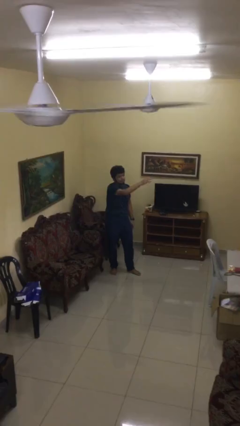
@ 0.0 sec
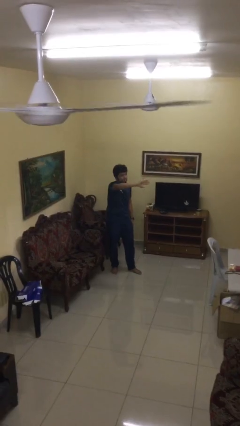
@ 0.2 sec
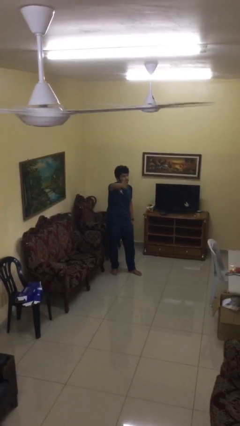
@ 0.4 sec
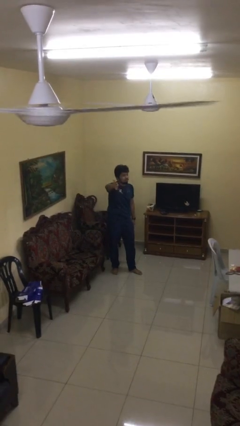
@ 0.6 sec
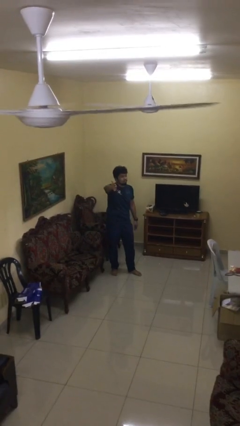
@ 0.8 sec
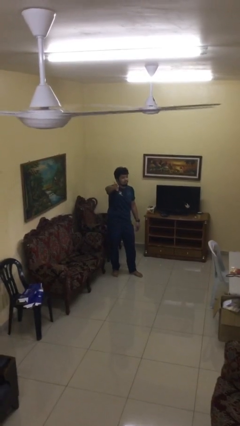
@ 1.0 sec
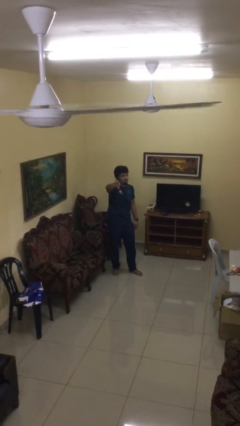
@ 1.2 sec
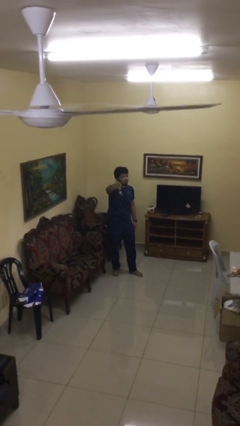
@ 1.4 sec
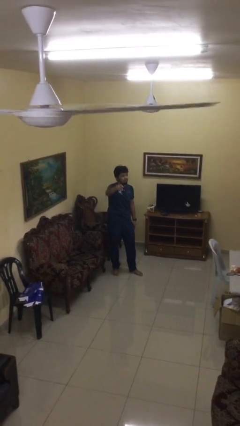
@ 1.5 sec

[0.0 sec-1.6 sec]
person gestures swipe right

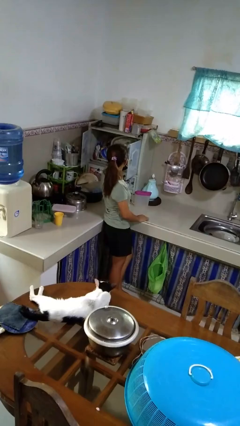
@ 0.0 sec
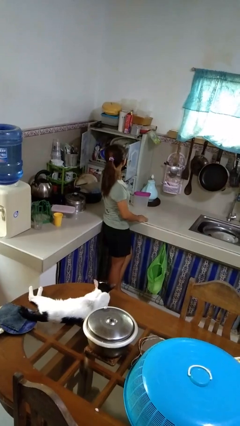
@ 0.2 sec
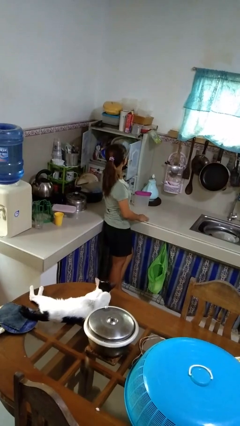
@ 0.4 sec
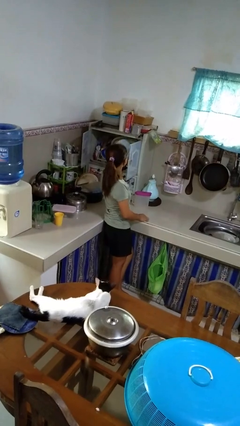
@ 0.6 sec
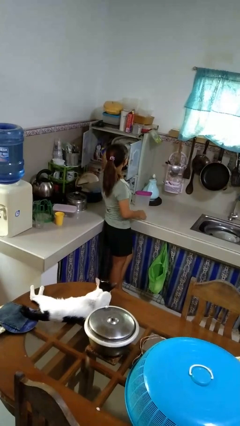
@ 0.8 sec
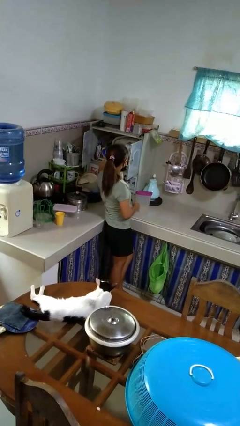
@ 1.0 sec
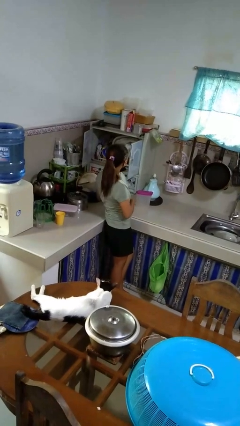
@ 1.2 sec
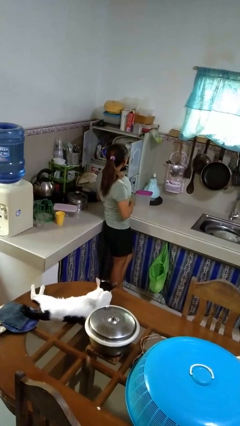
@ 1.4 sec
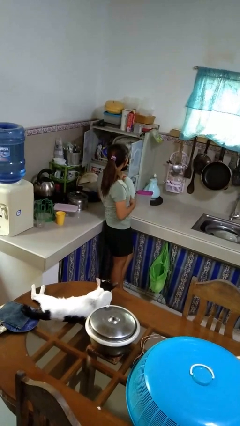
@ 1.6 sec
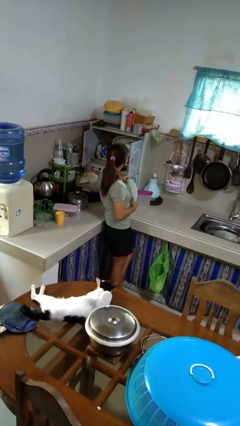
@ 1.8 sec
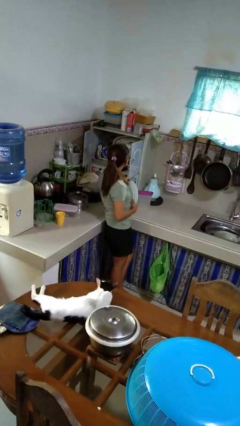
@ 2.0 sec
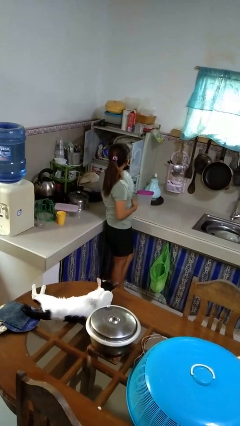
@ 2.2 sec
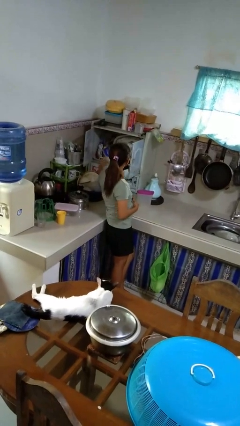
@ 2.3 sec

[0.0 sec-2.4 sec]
person takes object from kitchen drawer

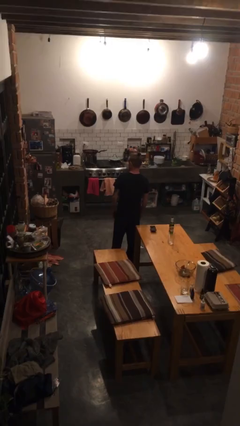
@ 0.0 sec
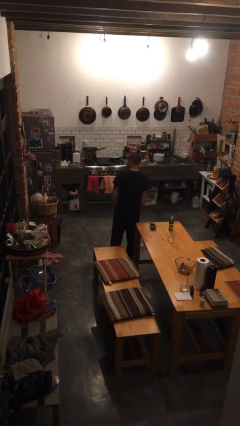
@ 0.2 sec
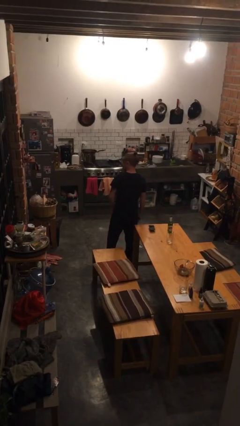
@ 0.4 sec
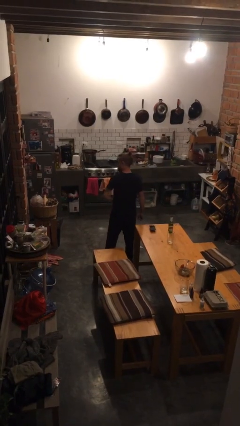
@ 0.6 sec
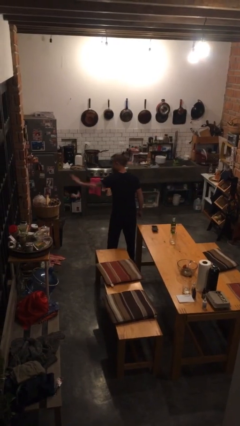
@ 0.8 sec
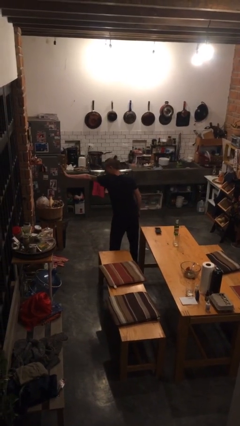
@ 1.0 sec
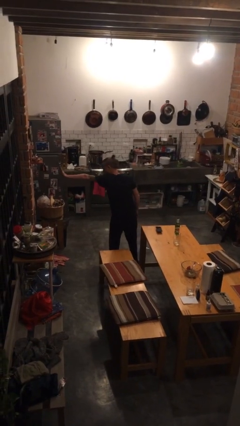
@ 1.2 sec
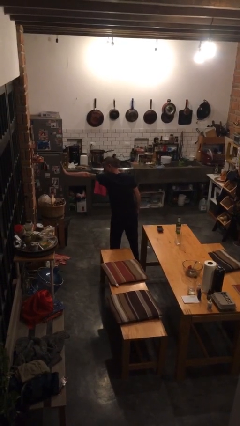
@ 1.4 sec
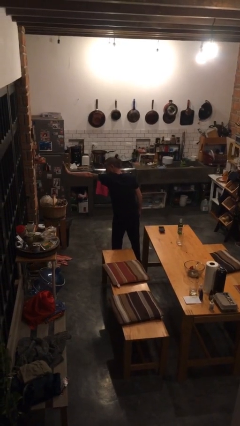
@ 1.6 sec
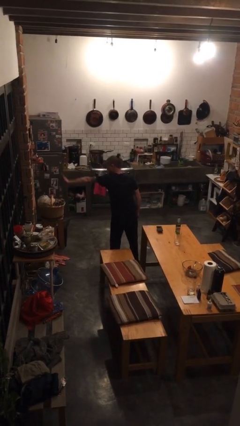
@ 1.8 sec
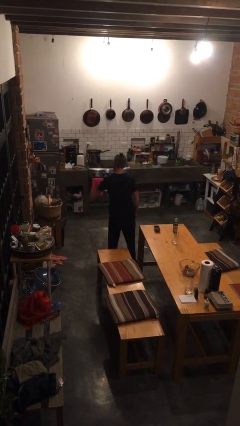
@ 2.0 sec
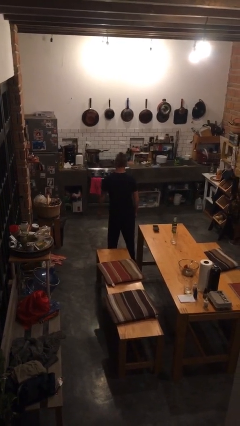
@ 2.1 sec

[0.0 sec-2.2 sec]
person gestures stop

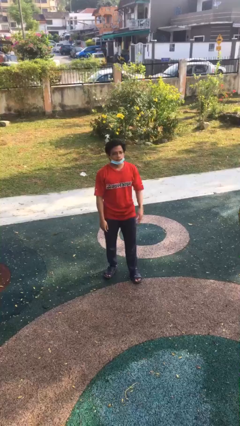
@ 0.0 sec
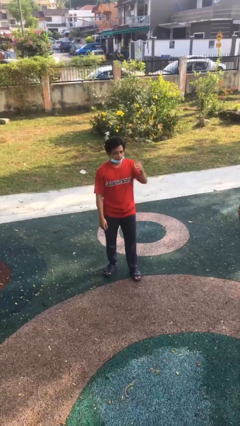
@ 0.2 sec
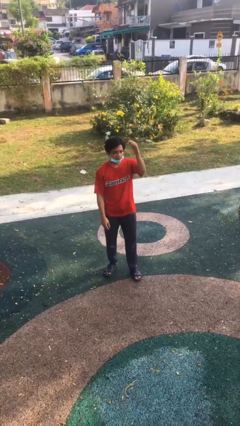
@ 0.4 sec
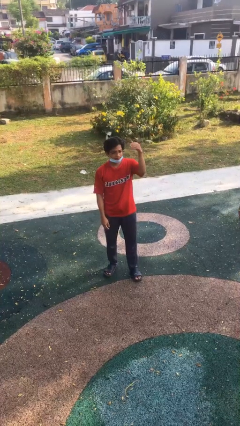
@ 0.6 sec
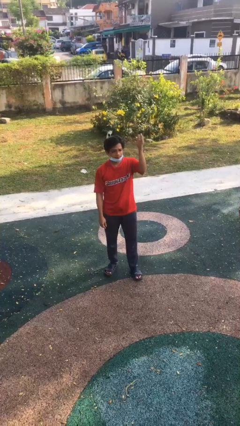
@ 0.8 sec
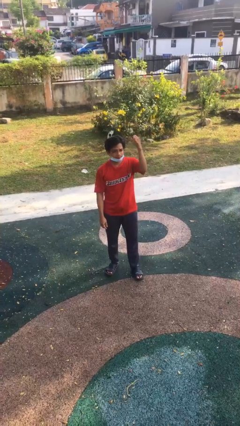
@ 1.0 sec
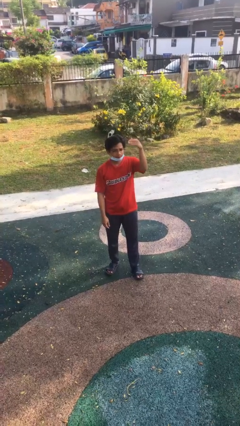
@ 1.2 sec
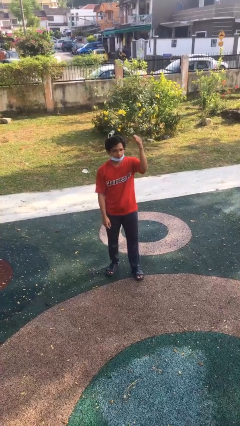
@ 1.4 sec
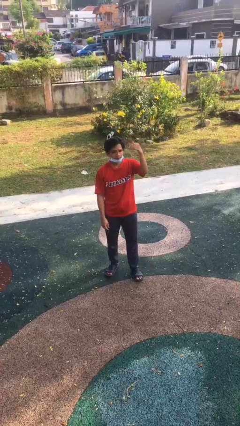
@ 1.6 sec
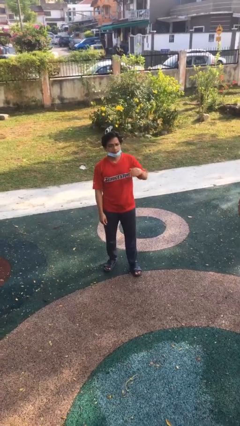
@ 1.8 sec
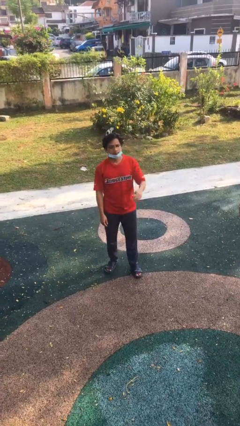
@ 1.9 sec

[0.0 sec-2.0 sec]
person gestures come here

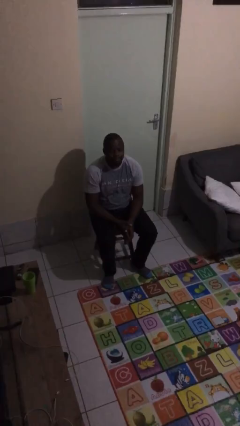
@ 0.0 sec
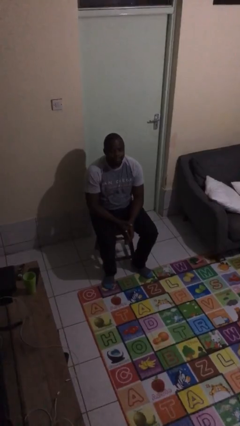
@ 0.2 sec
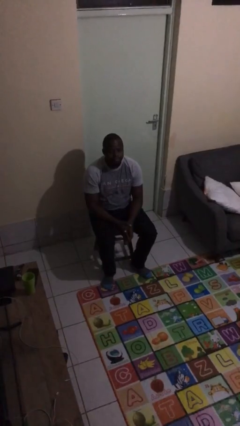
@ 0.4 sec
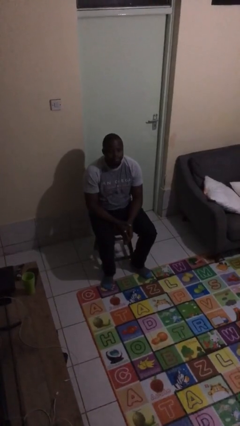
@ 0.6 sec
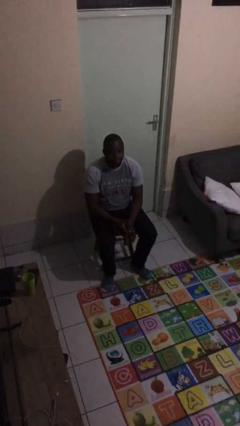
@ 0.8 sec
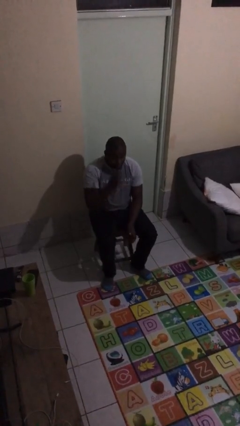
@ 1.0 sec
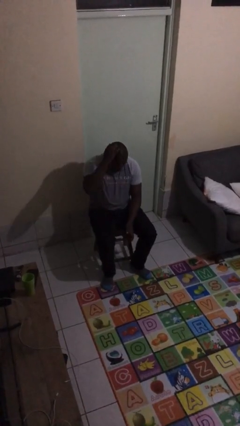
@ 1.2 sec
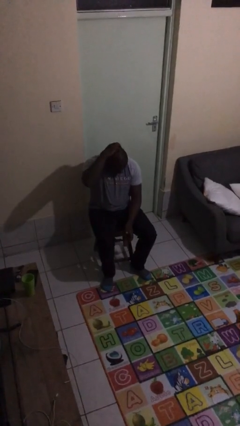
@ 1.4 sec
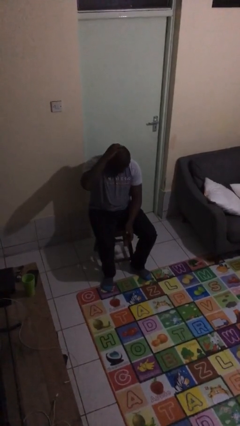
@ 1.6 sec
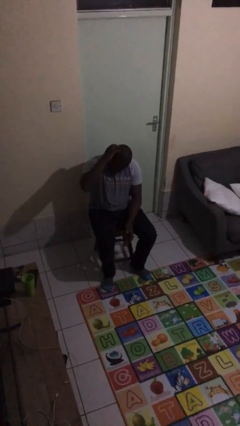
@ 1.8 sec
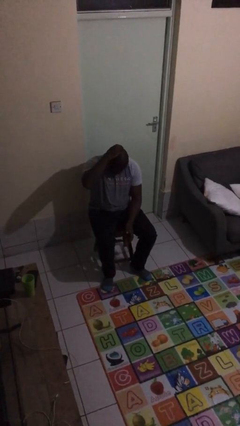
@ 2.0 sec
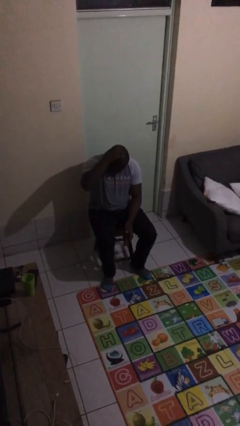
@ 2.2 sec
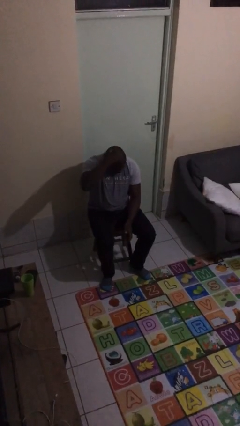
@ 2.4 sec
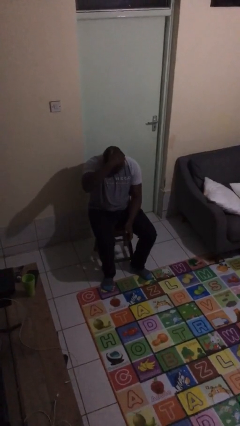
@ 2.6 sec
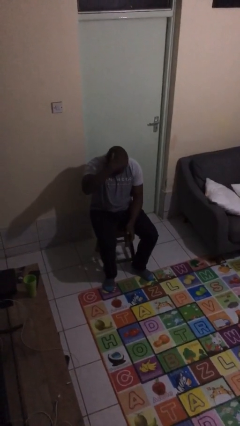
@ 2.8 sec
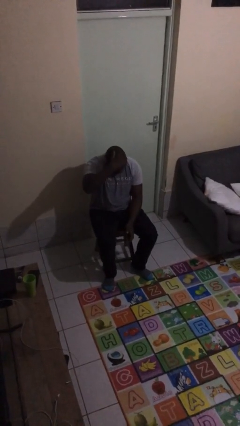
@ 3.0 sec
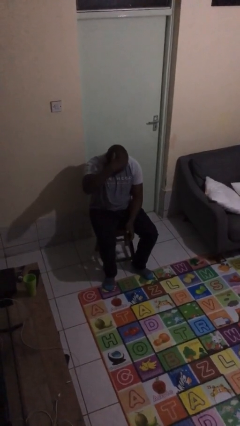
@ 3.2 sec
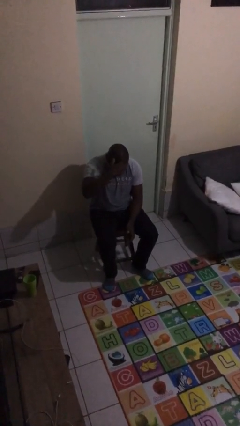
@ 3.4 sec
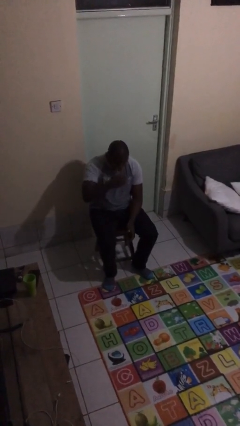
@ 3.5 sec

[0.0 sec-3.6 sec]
person scratches face

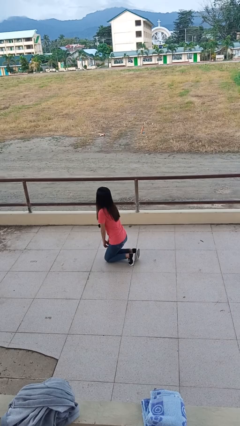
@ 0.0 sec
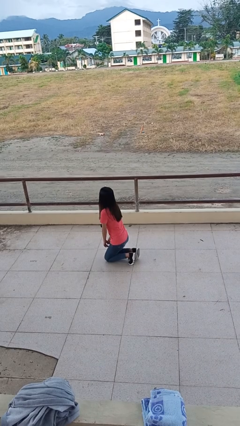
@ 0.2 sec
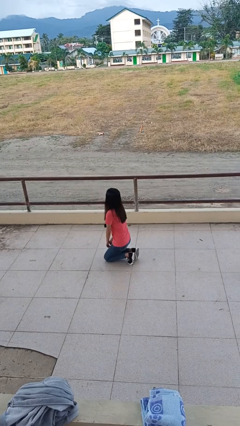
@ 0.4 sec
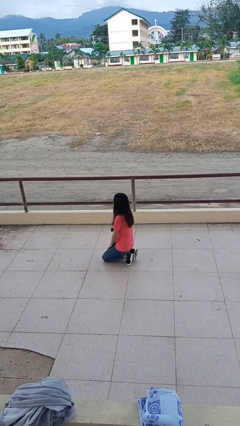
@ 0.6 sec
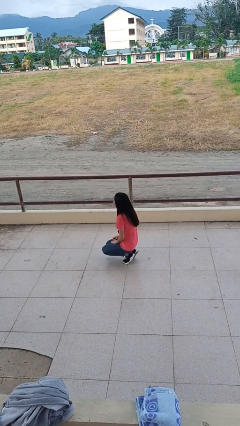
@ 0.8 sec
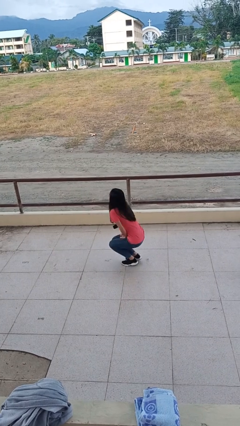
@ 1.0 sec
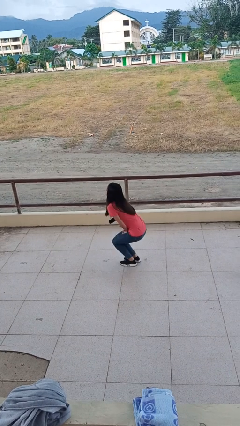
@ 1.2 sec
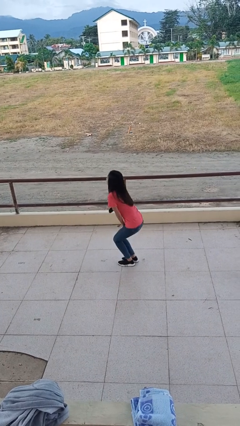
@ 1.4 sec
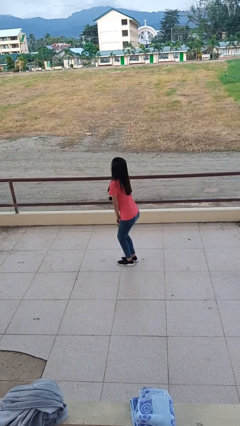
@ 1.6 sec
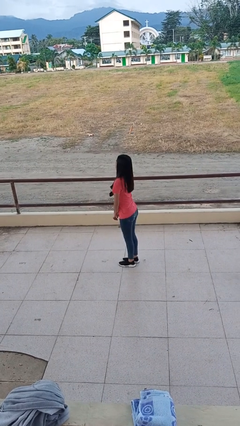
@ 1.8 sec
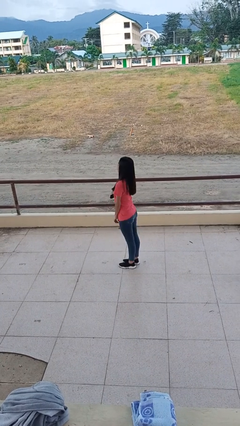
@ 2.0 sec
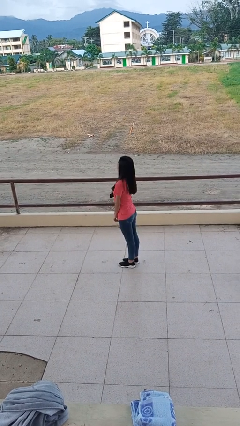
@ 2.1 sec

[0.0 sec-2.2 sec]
person stands up from floor

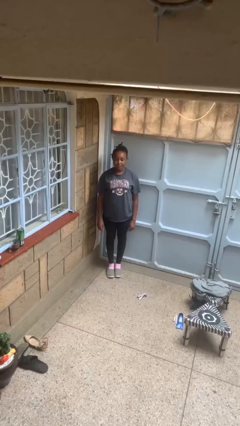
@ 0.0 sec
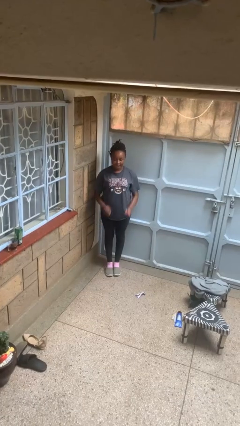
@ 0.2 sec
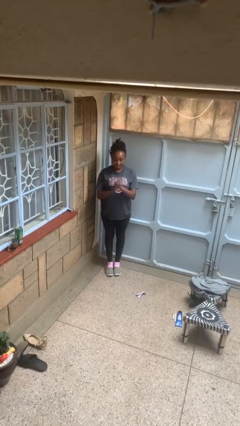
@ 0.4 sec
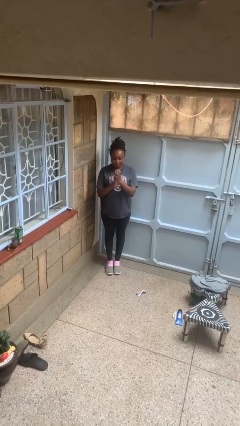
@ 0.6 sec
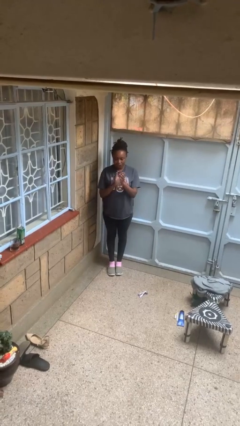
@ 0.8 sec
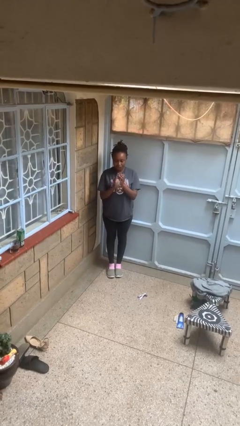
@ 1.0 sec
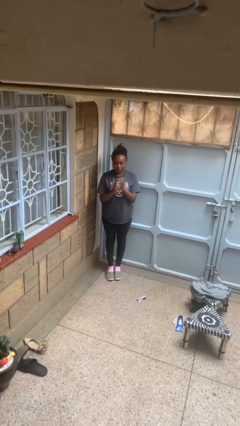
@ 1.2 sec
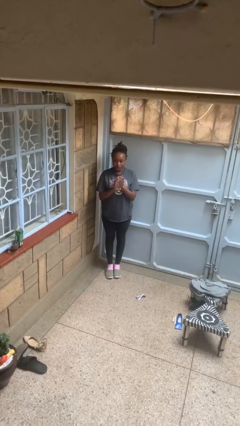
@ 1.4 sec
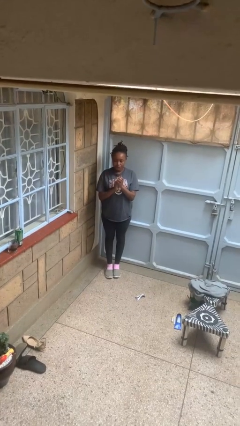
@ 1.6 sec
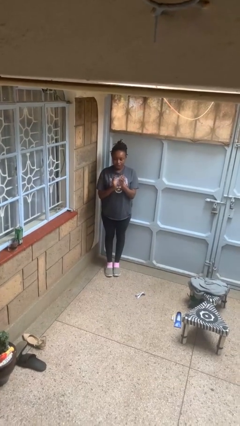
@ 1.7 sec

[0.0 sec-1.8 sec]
person claps hands

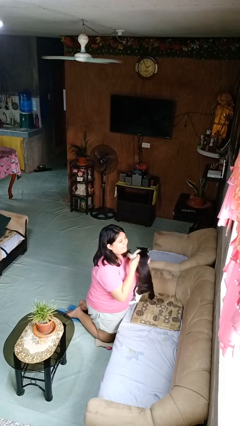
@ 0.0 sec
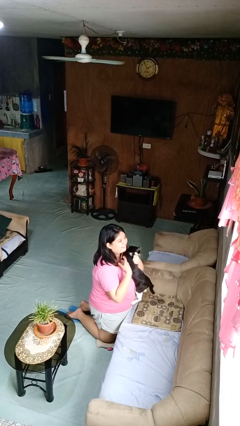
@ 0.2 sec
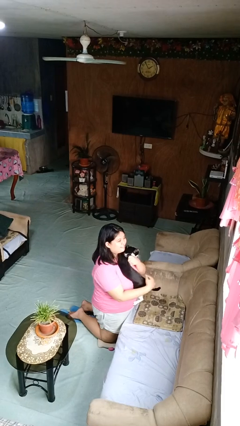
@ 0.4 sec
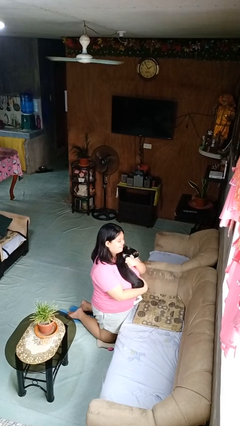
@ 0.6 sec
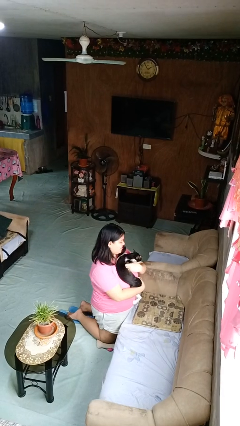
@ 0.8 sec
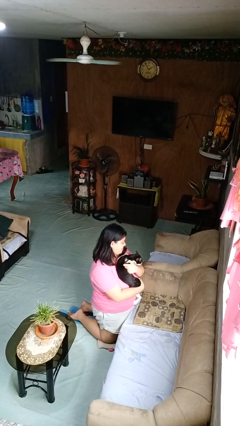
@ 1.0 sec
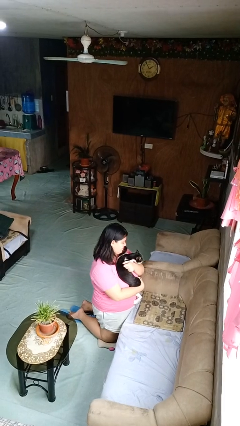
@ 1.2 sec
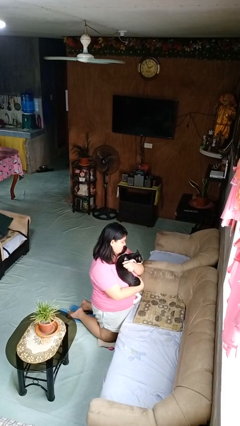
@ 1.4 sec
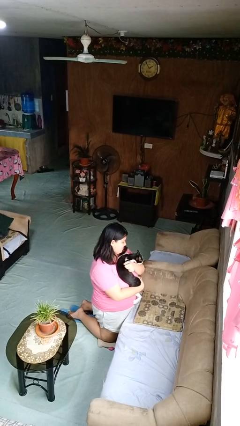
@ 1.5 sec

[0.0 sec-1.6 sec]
person hugs cat
